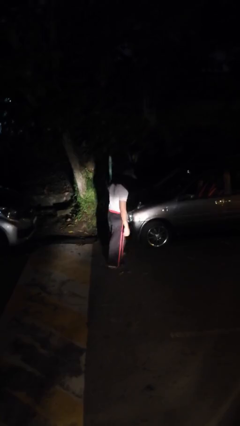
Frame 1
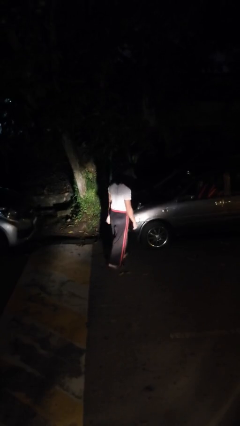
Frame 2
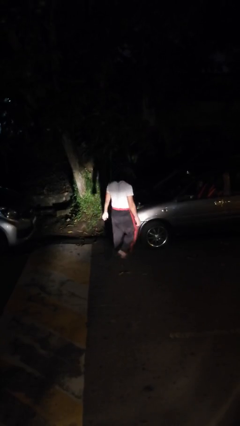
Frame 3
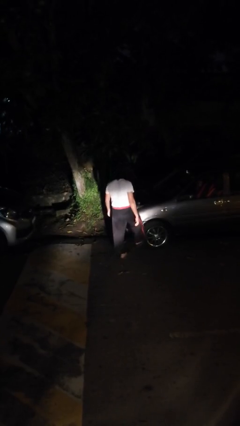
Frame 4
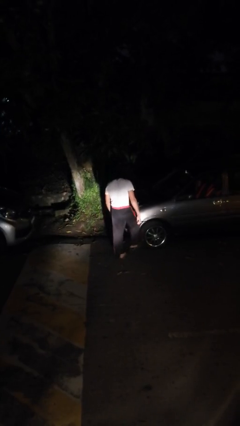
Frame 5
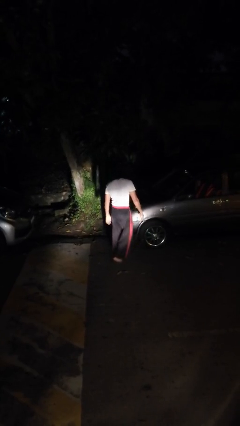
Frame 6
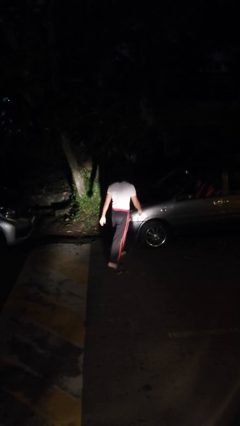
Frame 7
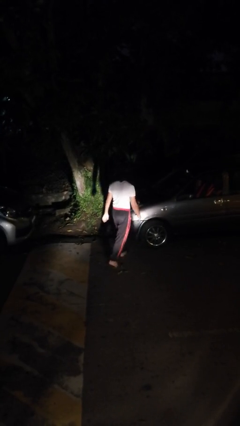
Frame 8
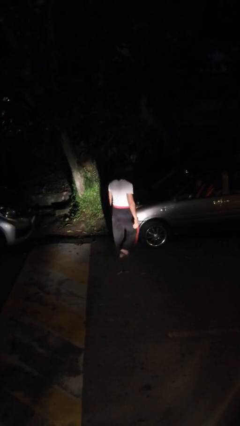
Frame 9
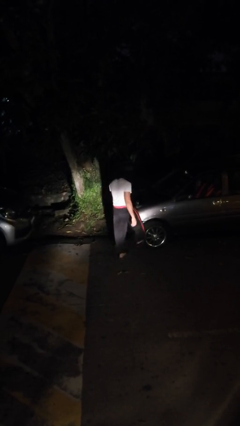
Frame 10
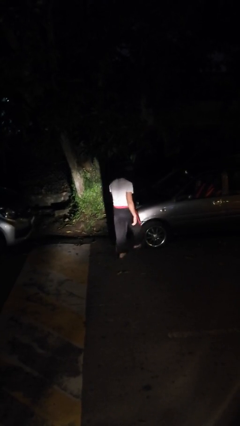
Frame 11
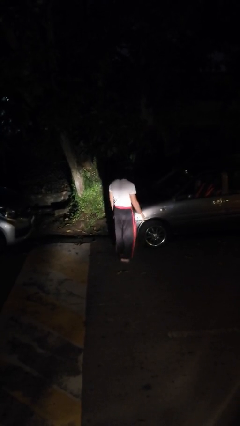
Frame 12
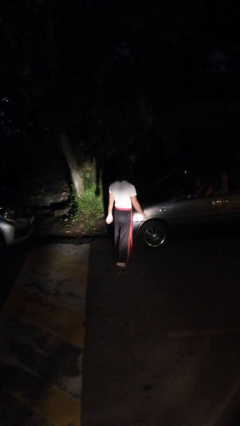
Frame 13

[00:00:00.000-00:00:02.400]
person kicks car tires

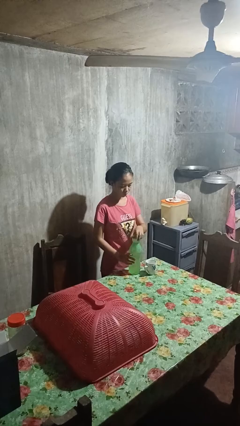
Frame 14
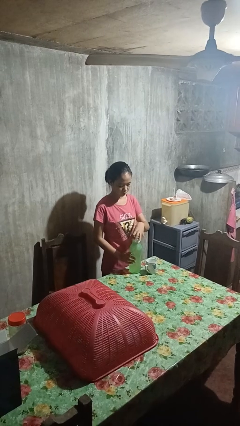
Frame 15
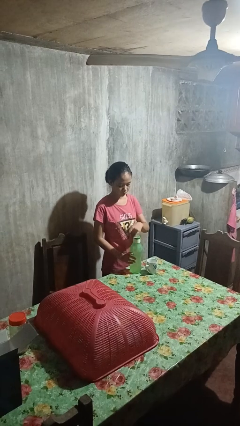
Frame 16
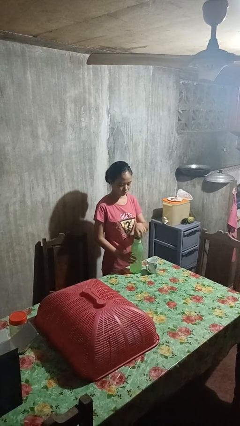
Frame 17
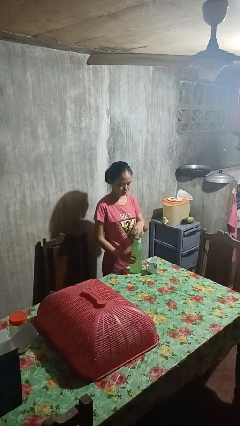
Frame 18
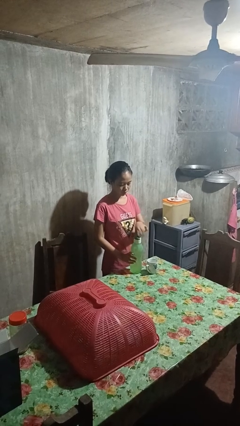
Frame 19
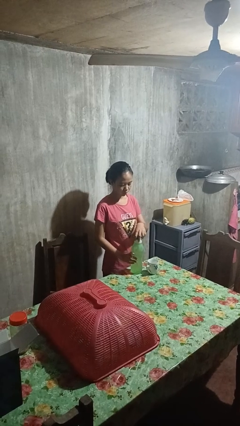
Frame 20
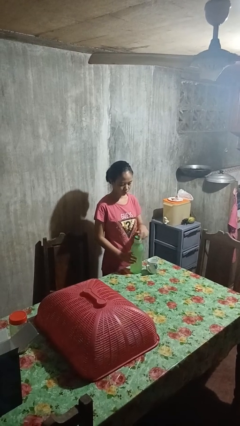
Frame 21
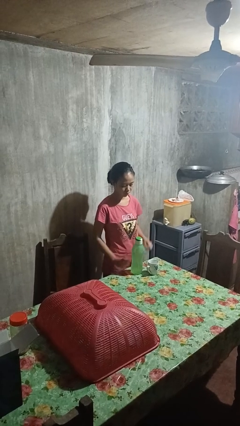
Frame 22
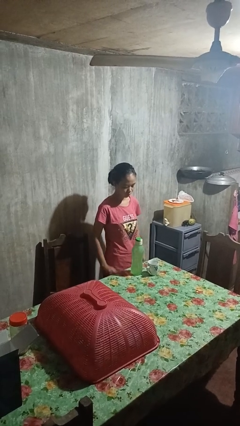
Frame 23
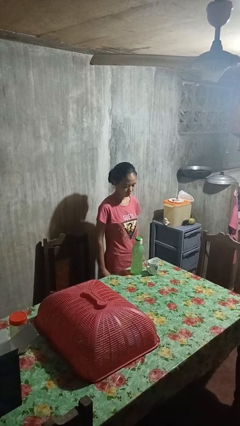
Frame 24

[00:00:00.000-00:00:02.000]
person screws lid to bottle

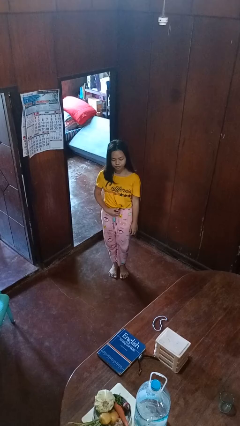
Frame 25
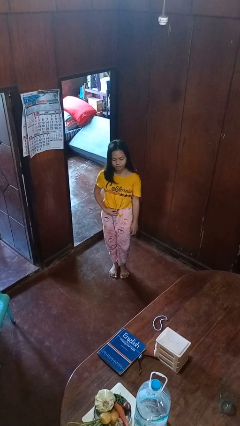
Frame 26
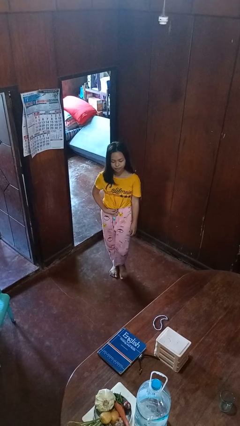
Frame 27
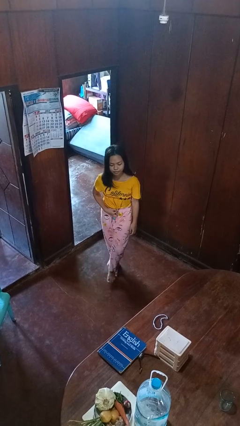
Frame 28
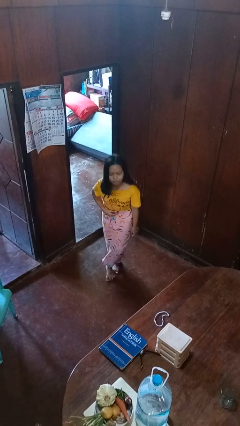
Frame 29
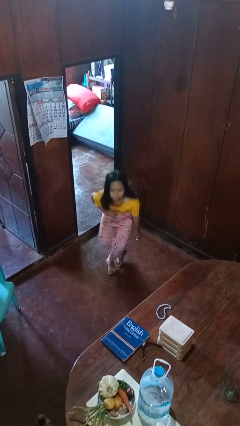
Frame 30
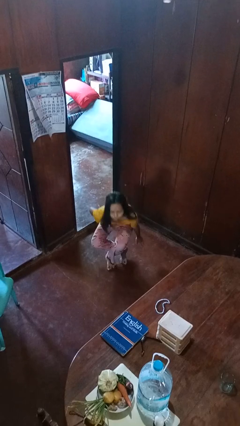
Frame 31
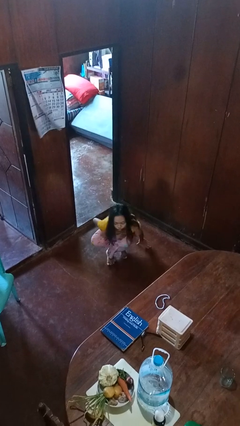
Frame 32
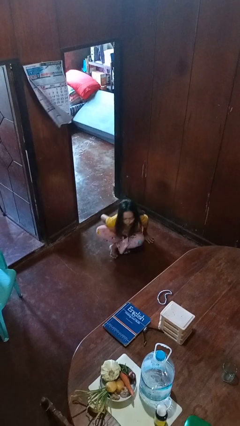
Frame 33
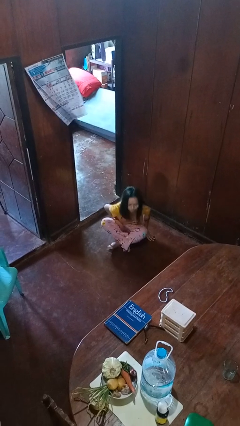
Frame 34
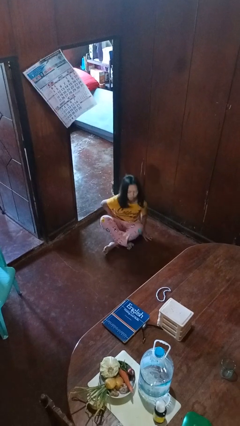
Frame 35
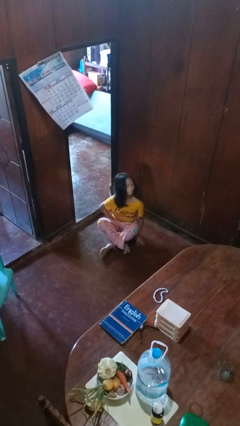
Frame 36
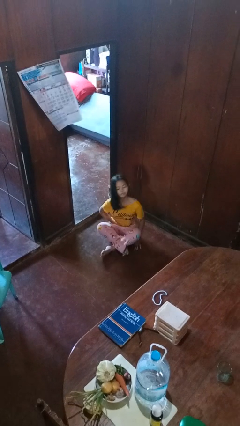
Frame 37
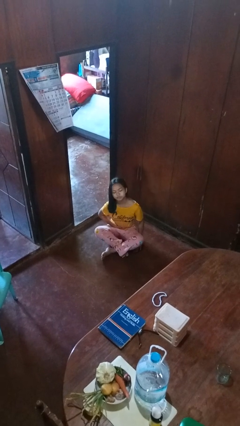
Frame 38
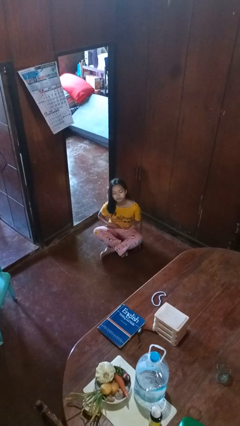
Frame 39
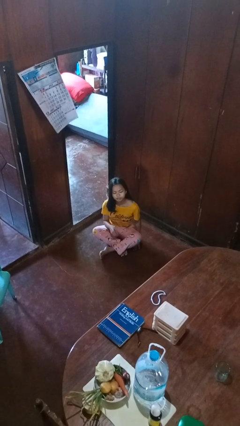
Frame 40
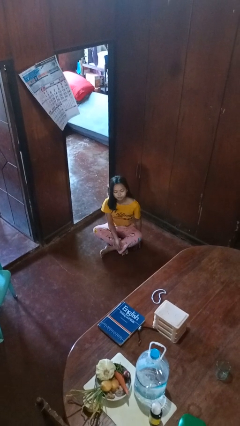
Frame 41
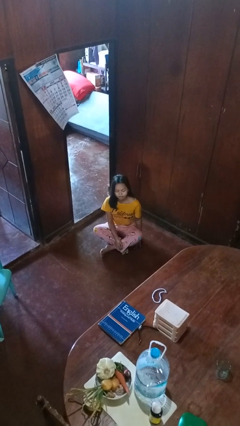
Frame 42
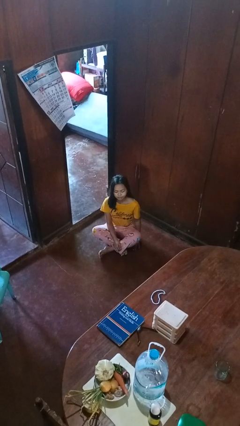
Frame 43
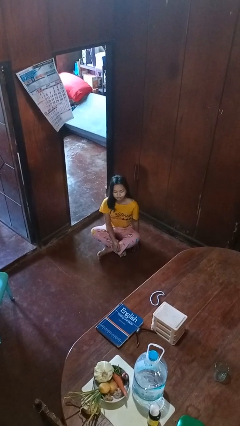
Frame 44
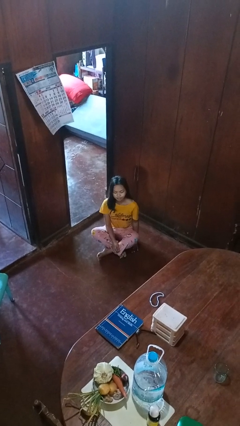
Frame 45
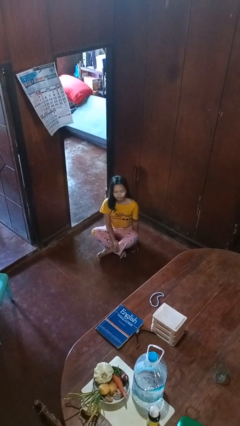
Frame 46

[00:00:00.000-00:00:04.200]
person sits crisscross

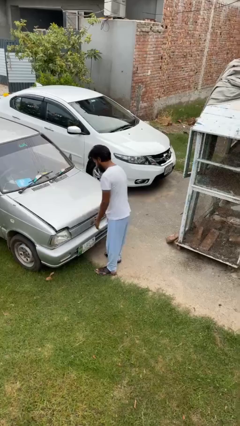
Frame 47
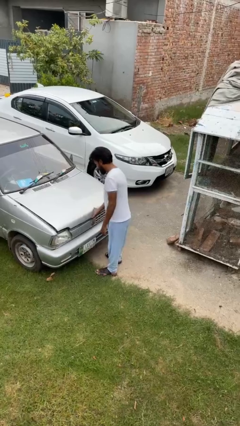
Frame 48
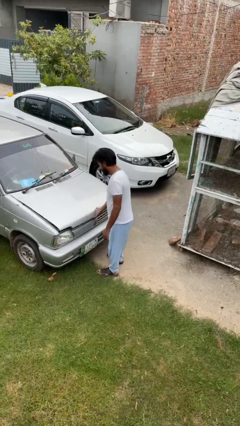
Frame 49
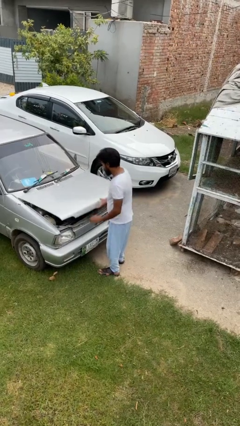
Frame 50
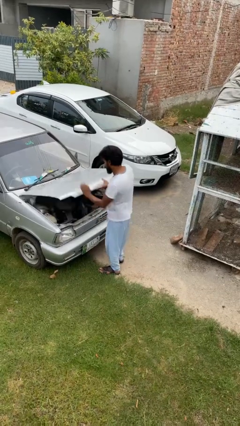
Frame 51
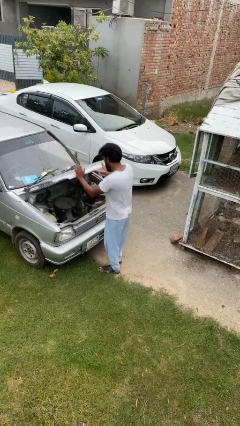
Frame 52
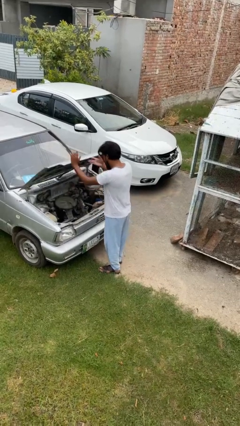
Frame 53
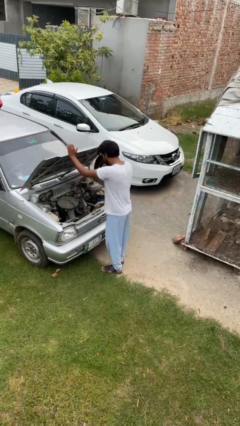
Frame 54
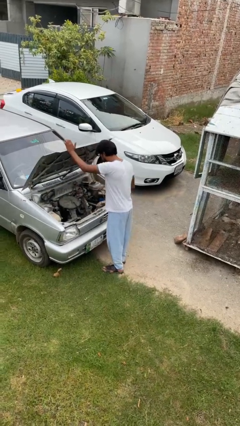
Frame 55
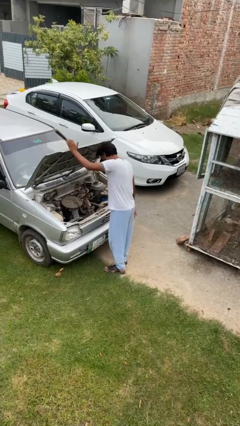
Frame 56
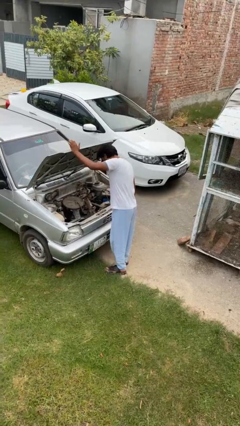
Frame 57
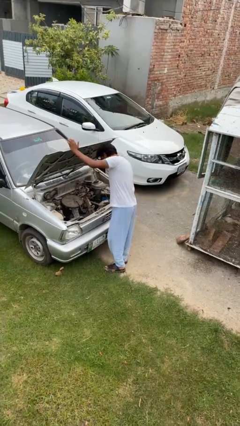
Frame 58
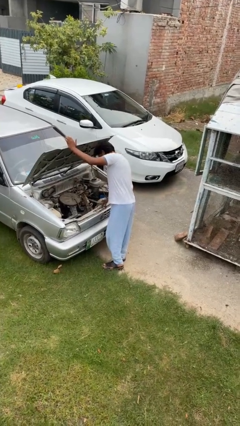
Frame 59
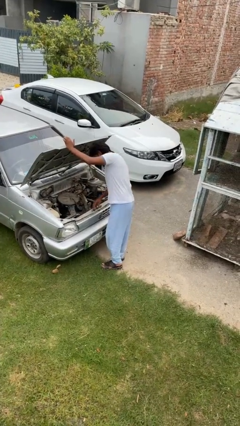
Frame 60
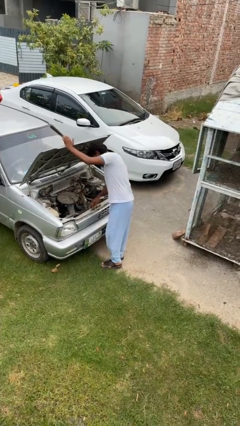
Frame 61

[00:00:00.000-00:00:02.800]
person opens car hood

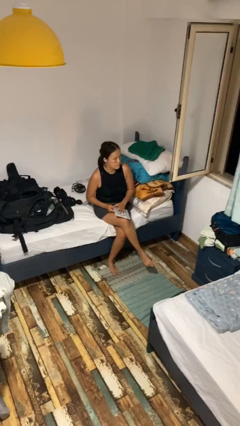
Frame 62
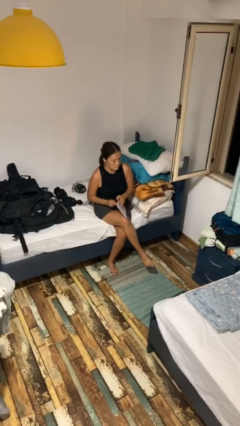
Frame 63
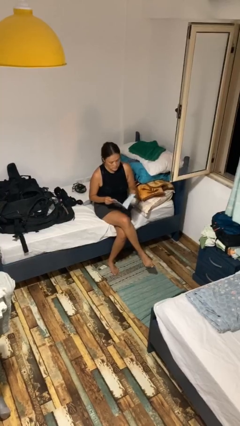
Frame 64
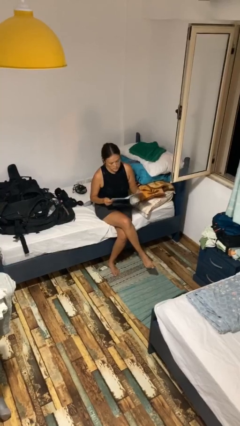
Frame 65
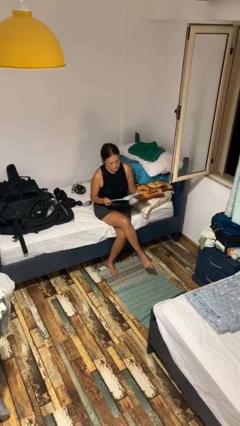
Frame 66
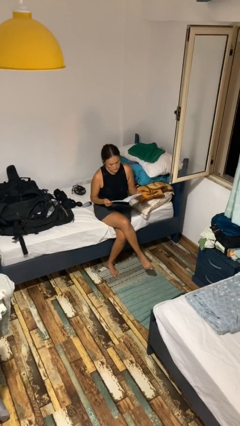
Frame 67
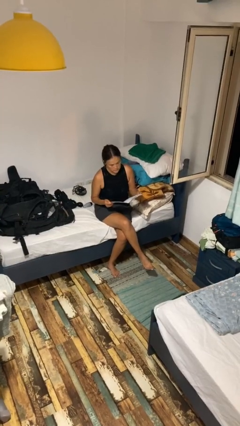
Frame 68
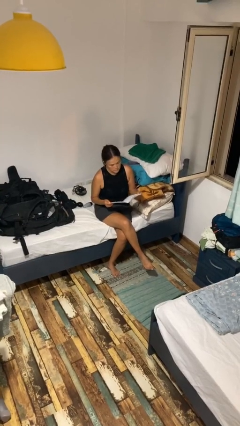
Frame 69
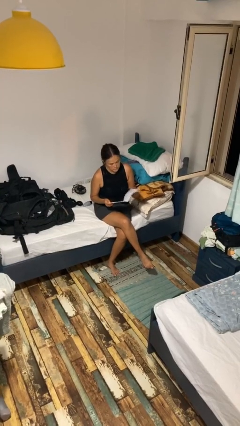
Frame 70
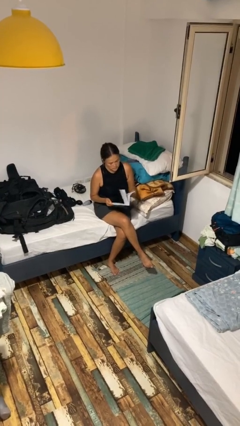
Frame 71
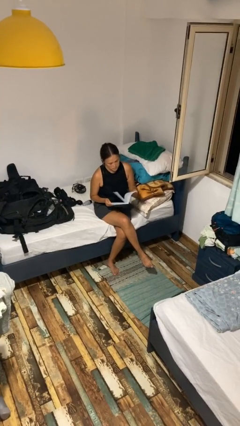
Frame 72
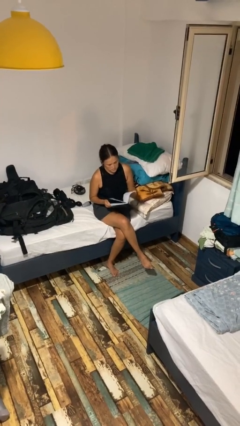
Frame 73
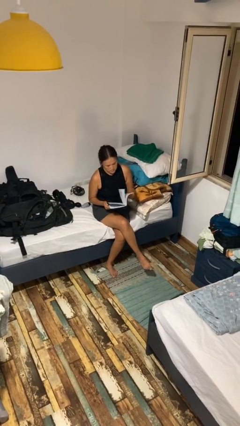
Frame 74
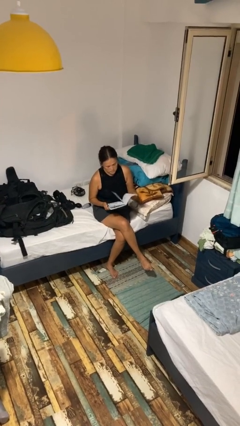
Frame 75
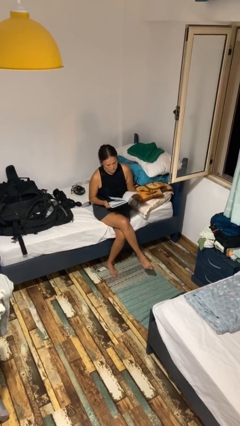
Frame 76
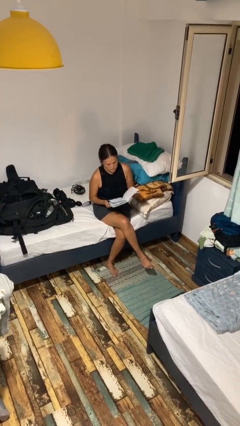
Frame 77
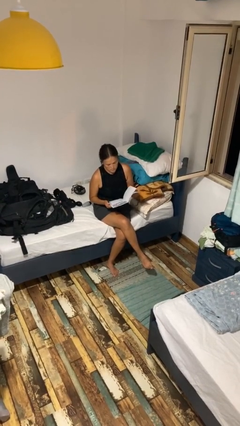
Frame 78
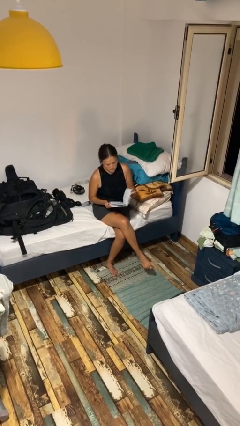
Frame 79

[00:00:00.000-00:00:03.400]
person reads magazine

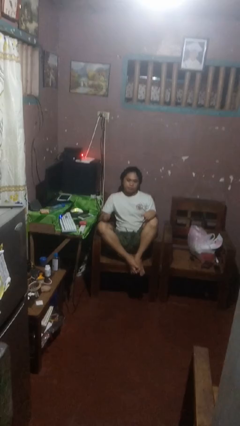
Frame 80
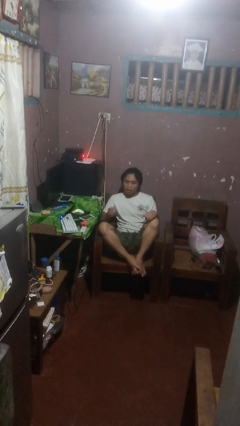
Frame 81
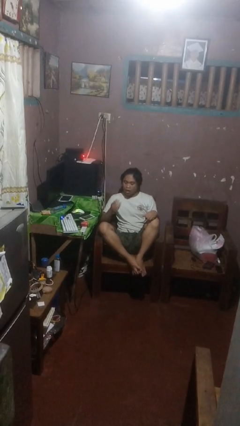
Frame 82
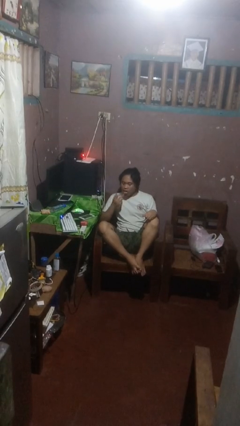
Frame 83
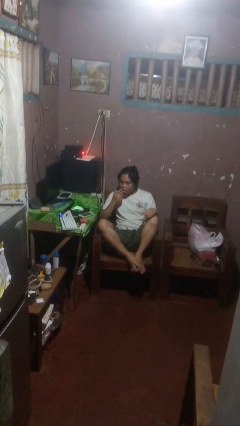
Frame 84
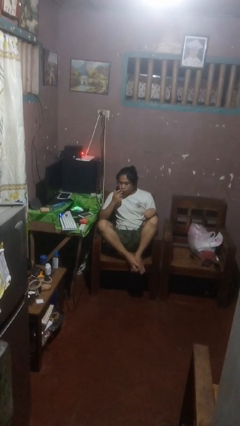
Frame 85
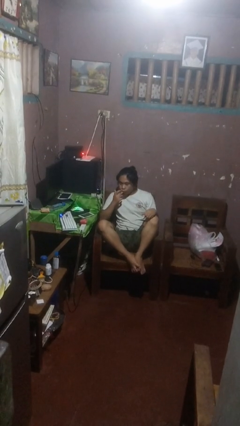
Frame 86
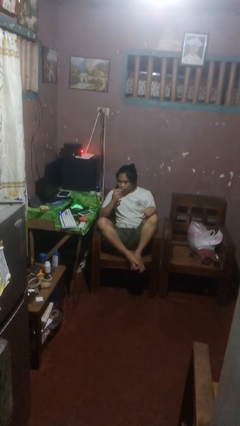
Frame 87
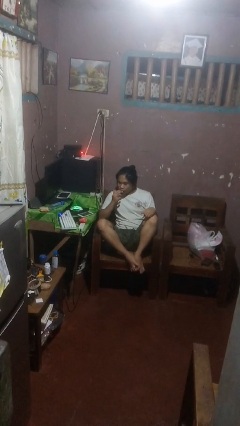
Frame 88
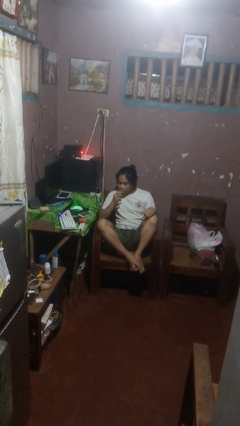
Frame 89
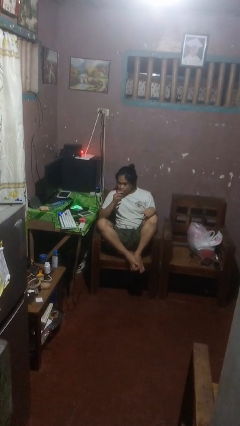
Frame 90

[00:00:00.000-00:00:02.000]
person licks fingers

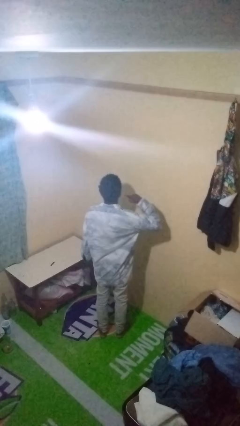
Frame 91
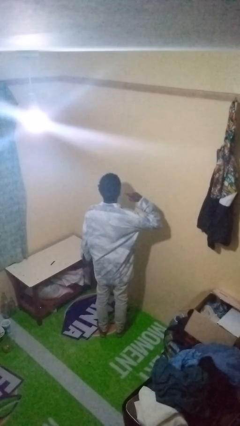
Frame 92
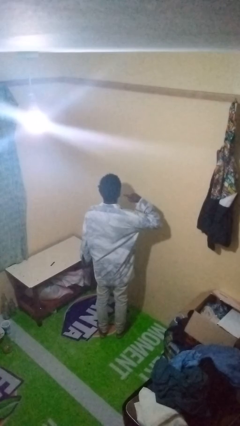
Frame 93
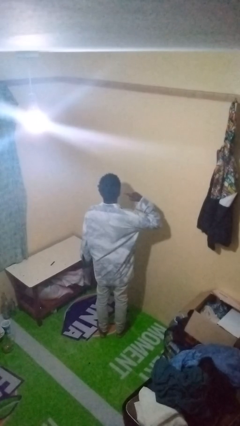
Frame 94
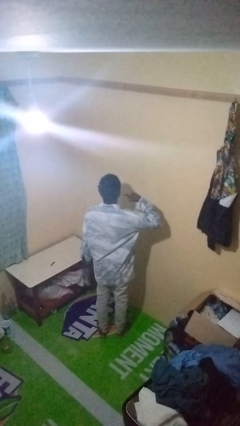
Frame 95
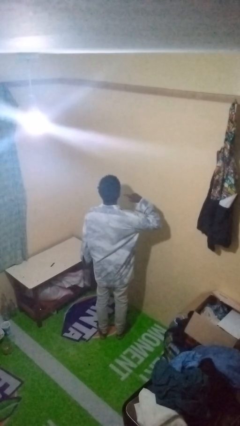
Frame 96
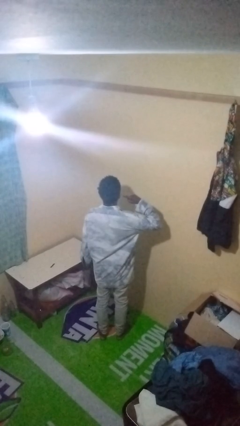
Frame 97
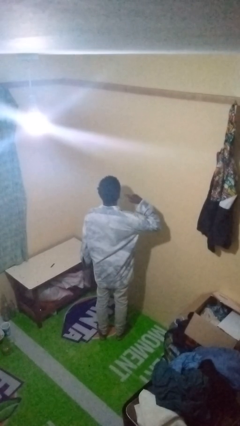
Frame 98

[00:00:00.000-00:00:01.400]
person gestures listen closely
